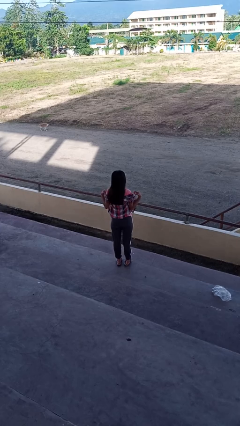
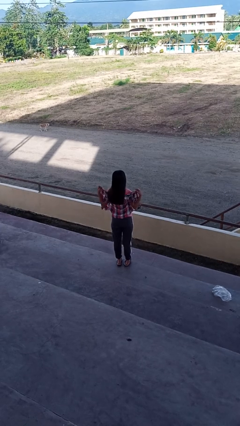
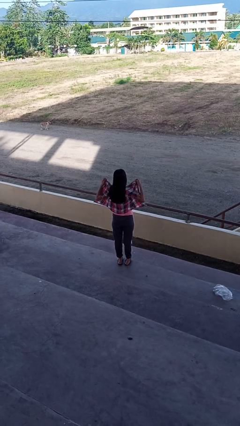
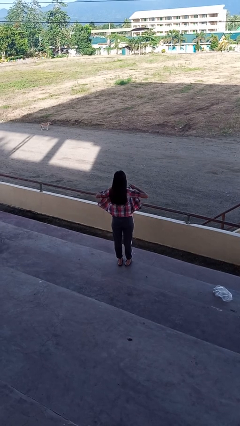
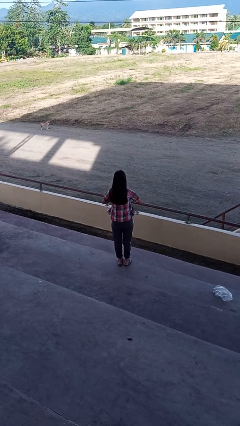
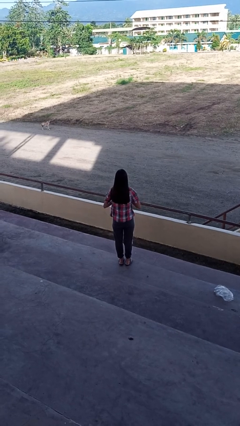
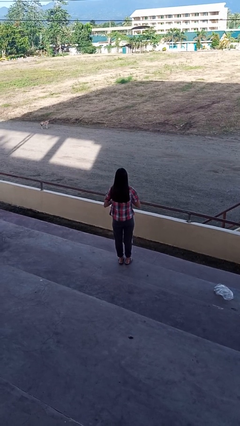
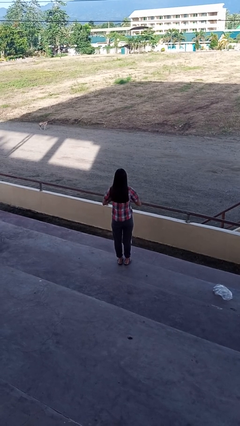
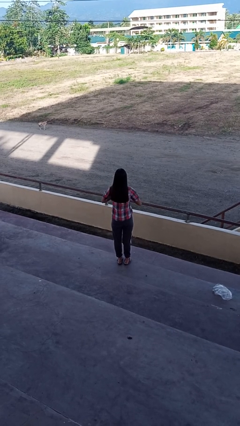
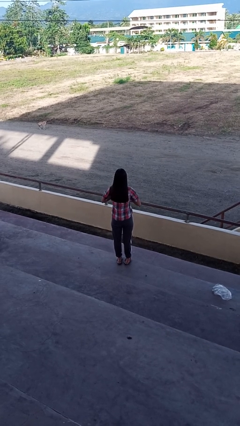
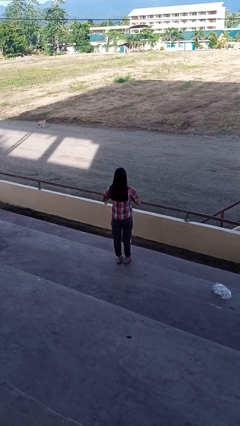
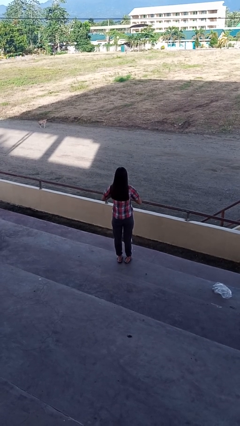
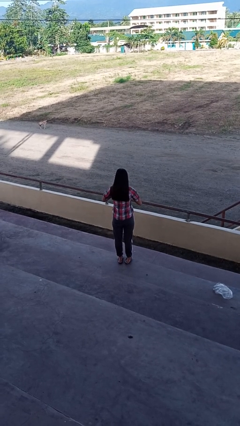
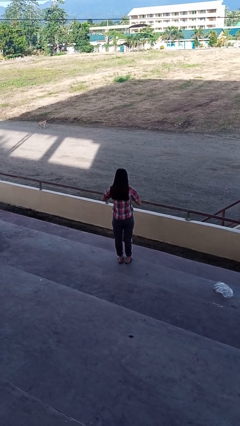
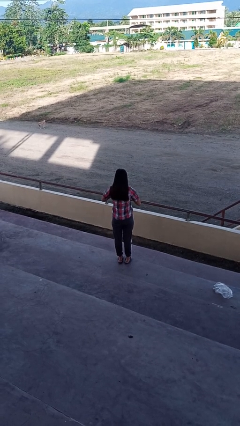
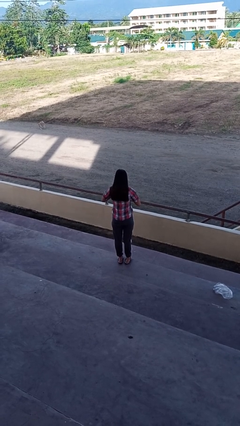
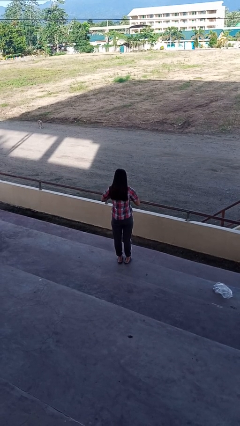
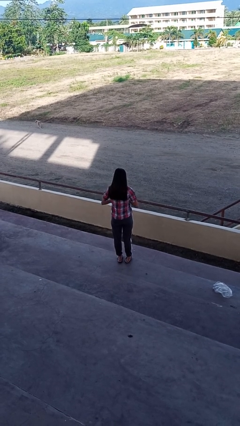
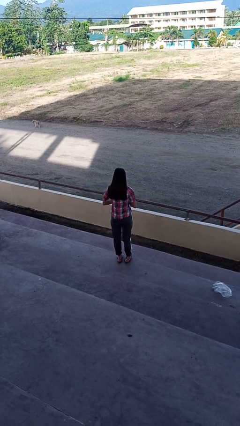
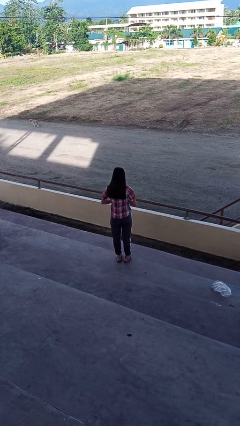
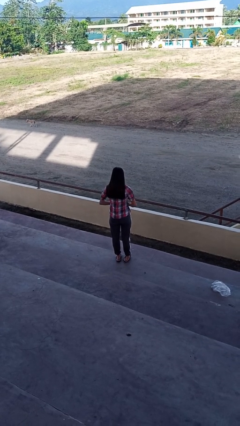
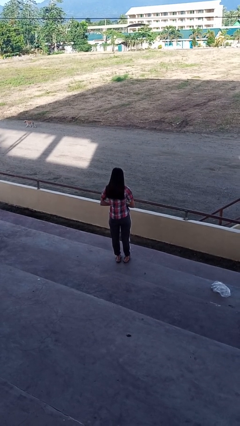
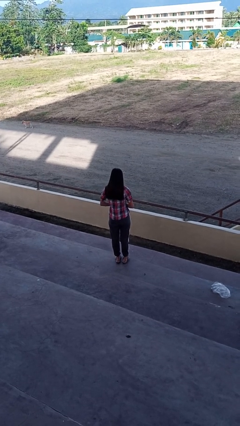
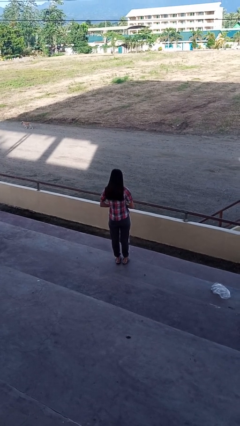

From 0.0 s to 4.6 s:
person buttons shirt

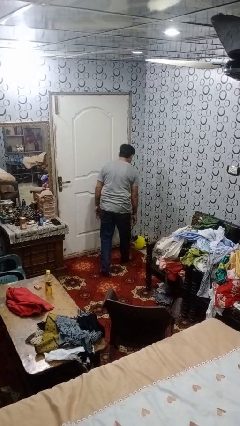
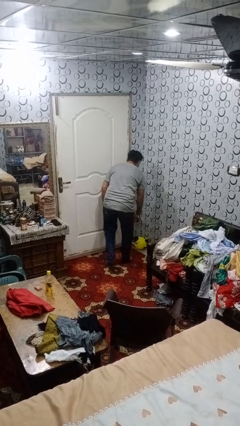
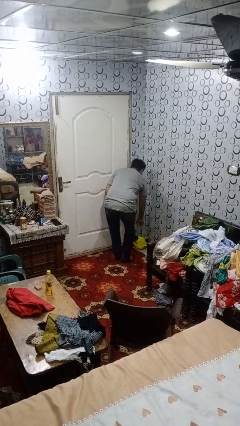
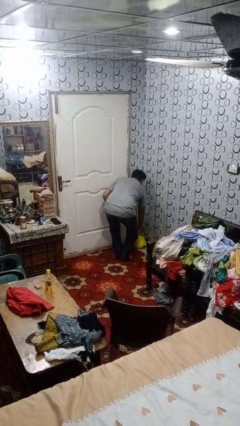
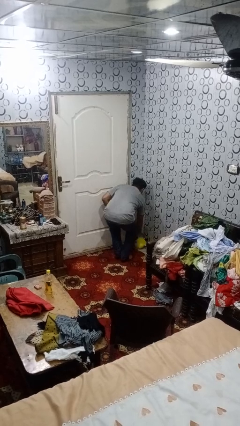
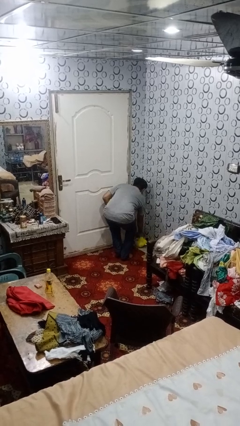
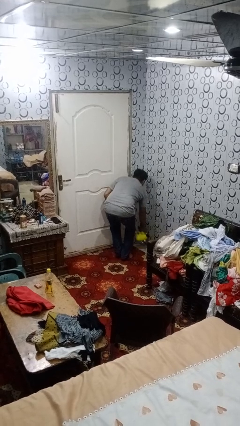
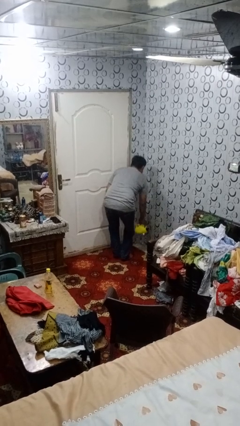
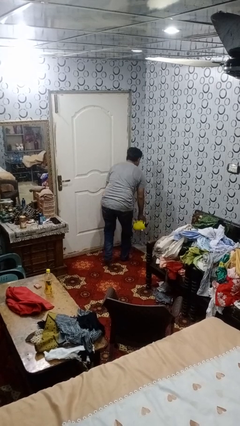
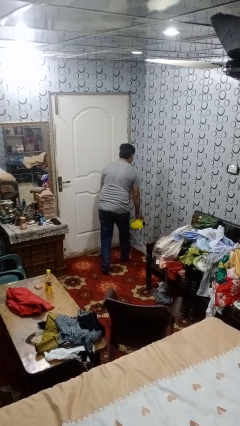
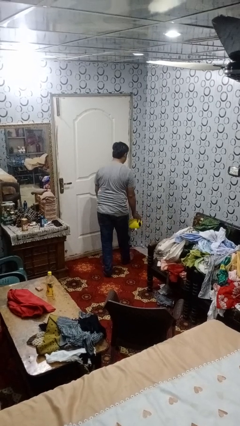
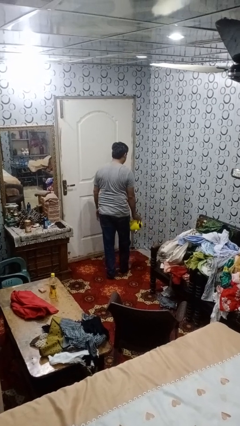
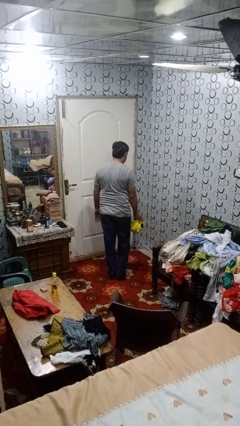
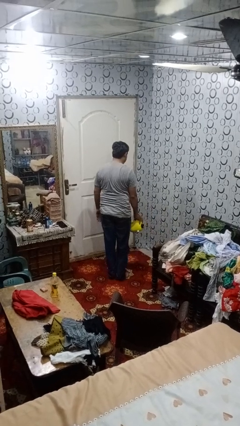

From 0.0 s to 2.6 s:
person picks up object from floor

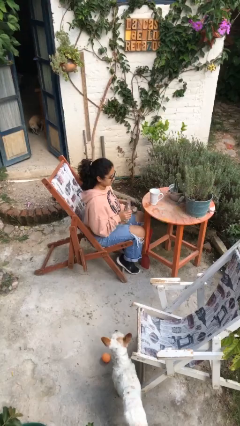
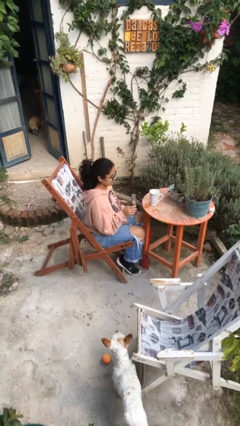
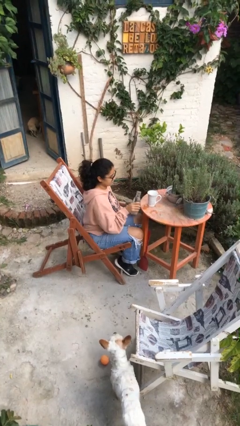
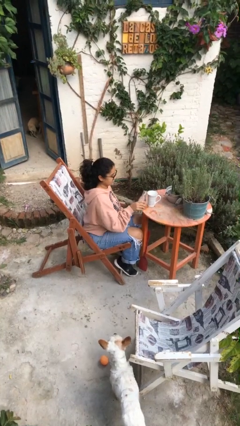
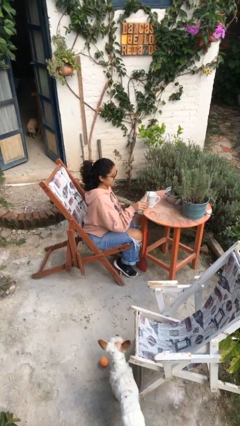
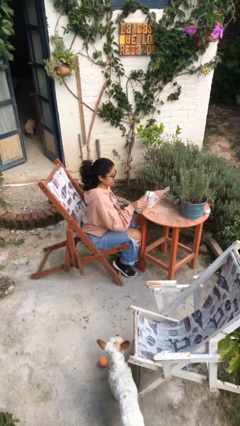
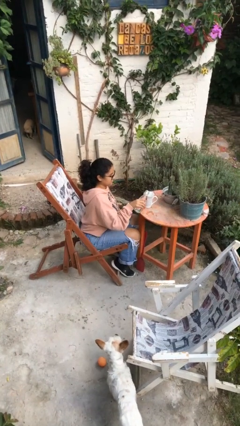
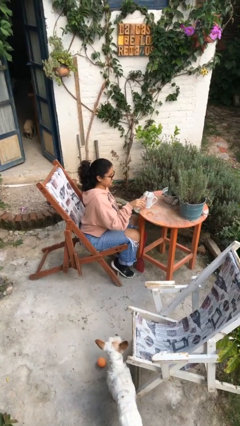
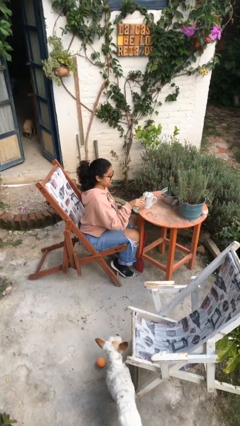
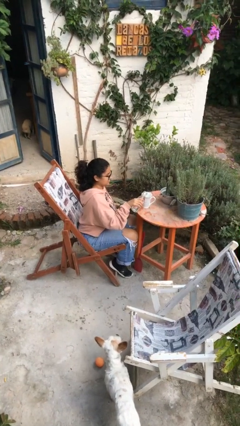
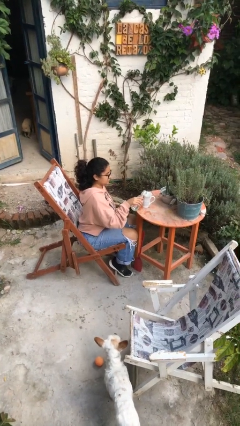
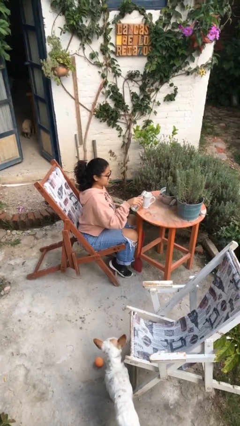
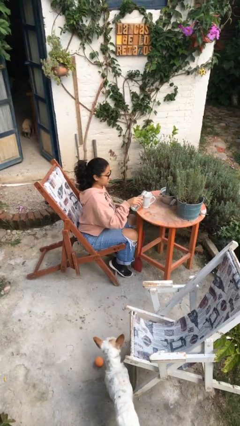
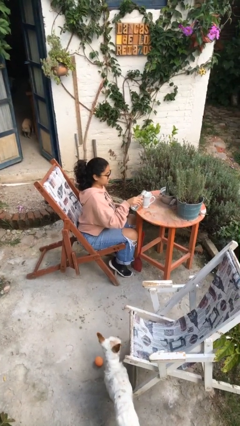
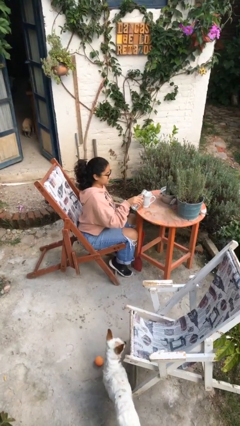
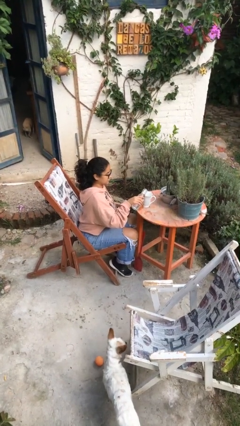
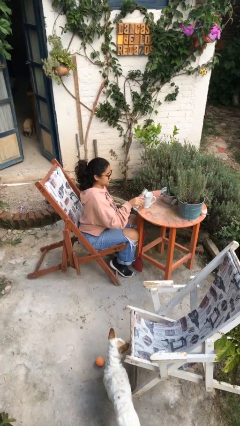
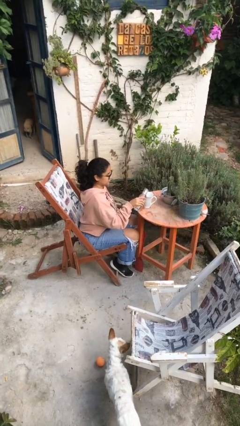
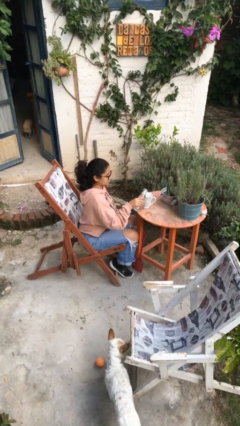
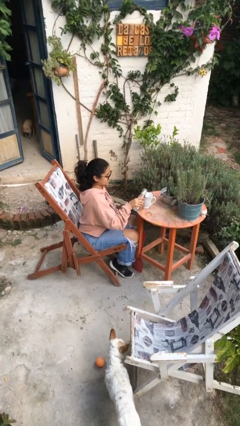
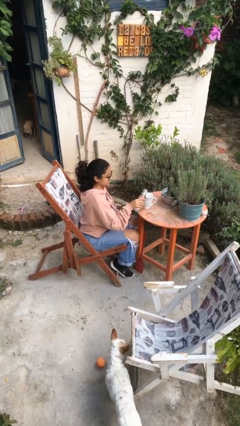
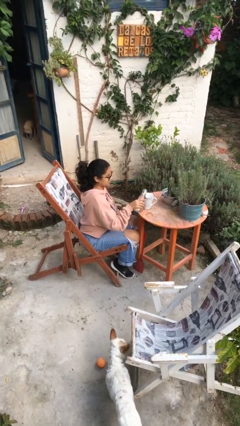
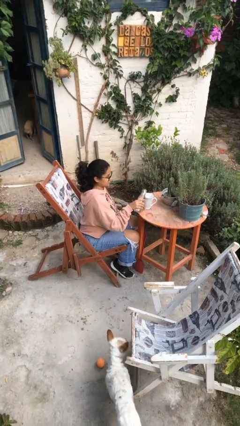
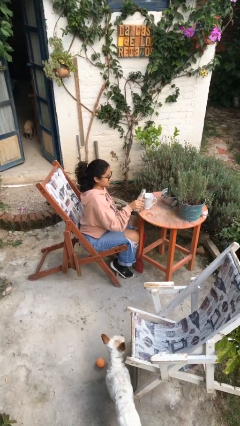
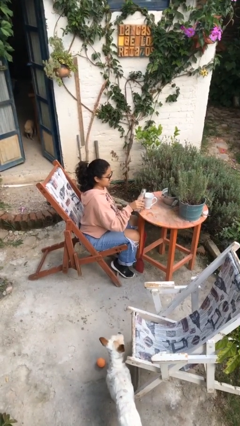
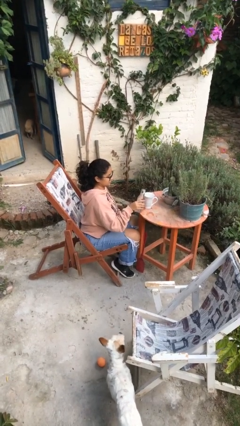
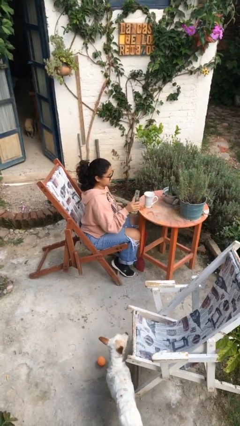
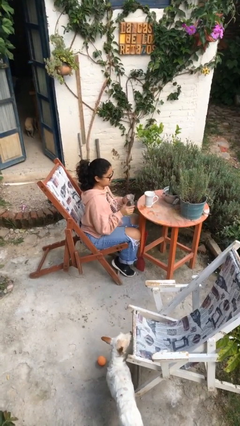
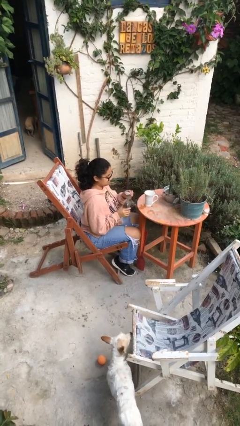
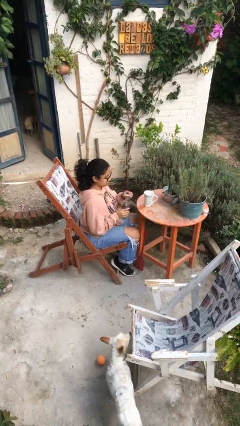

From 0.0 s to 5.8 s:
person pours liquid into cup

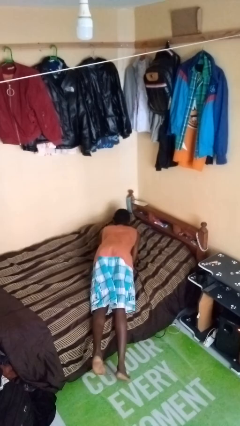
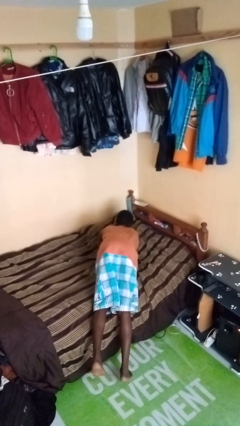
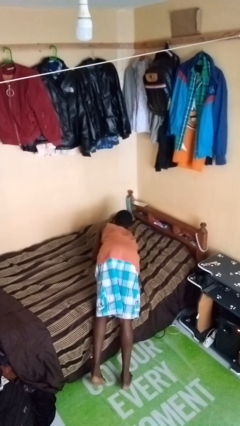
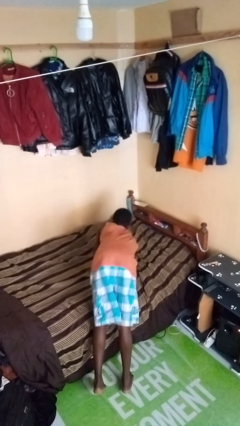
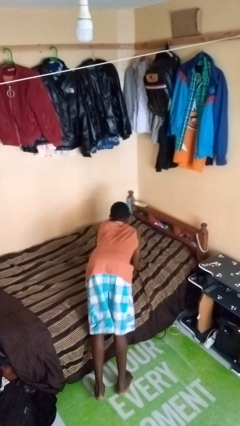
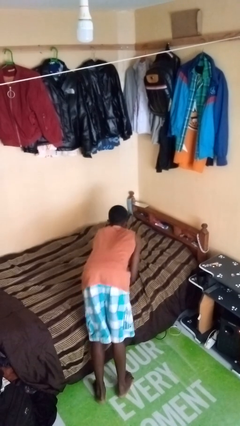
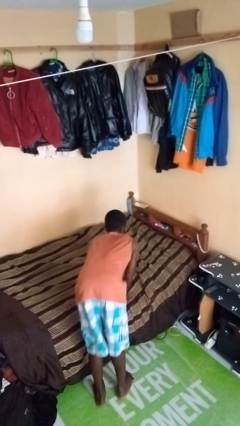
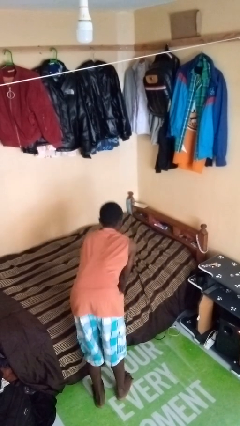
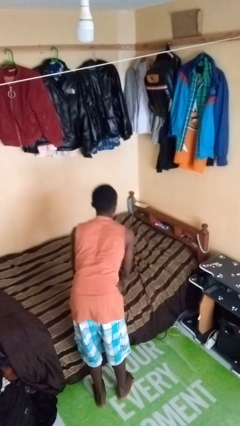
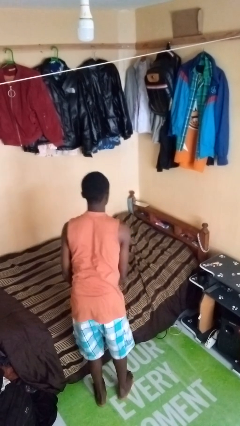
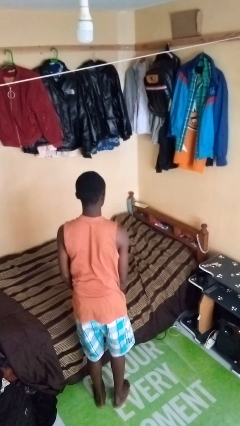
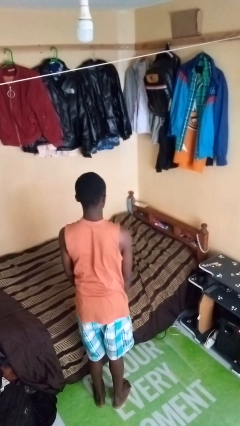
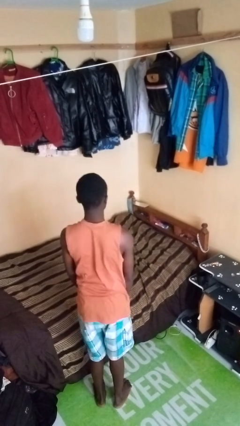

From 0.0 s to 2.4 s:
person stands up

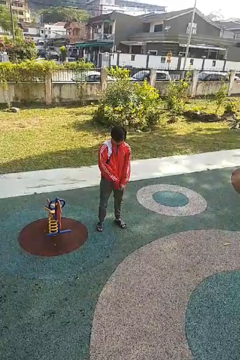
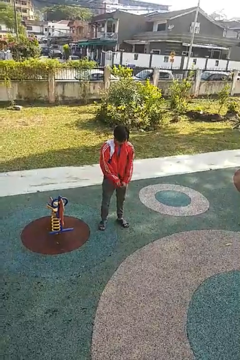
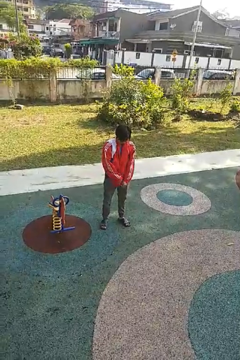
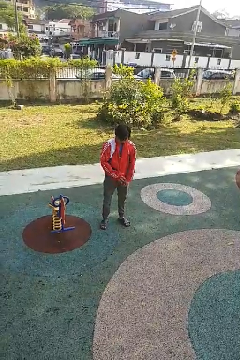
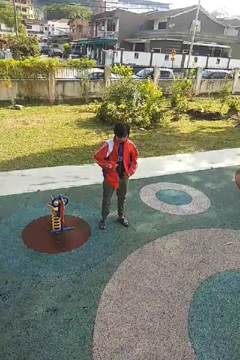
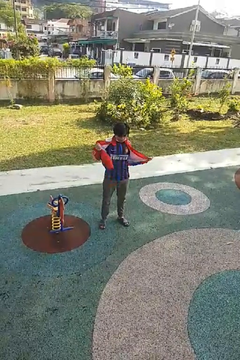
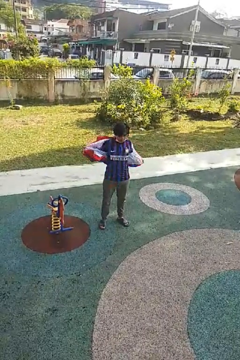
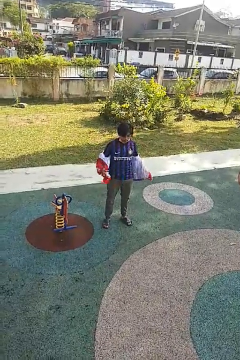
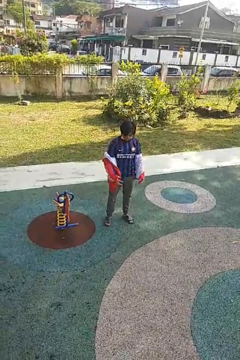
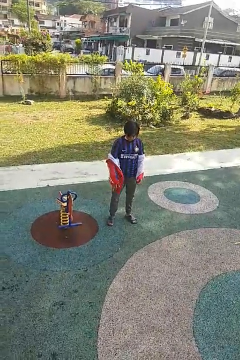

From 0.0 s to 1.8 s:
person takes off jacket

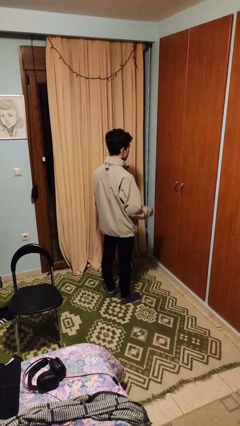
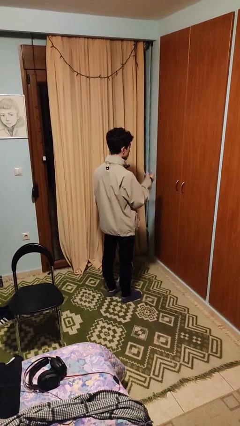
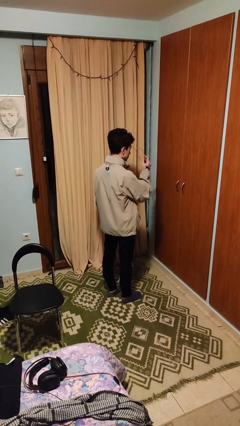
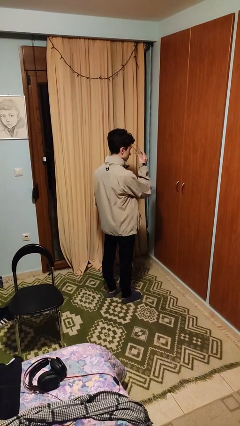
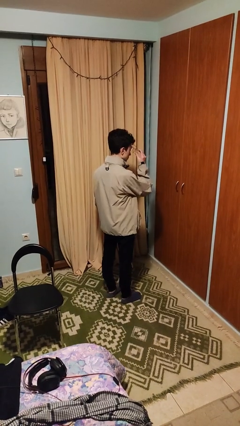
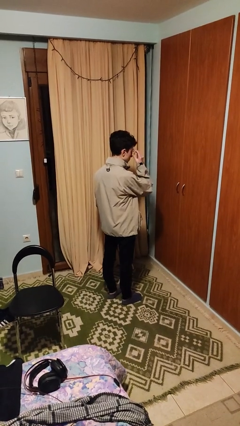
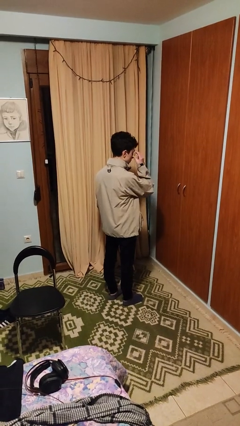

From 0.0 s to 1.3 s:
person puts on glasses
